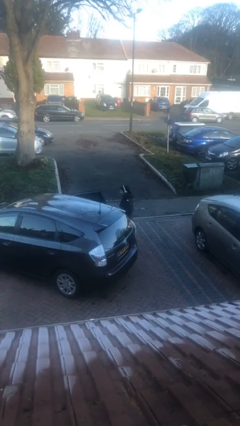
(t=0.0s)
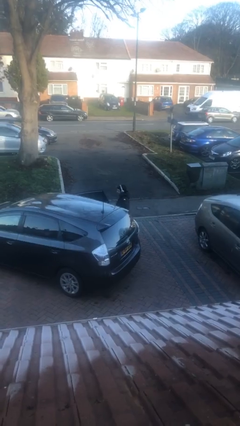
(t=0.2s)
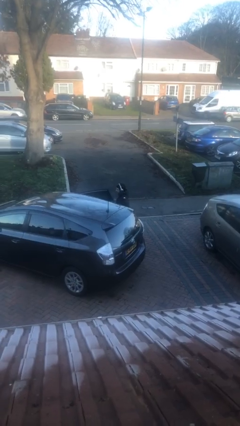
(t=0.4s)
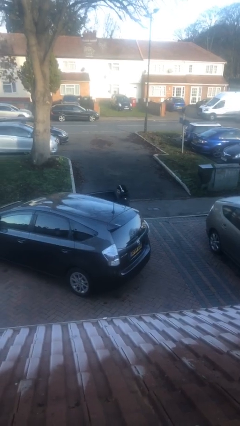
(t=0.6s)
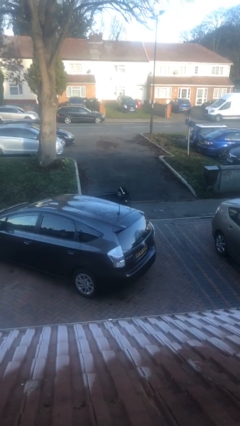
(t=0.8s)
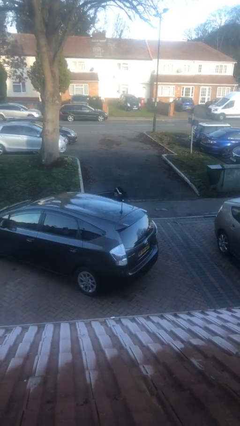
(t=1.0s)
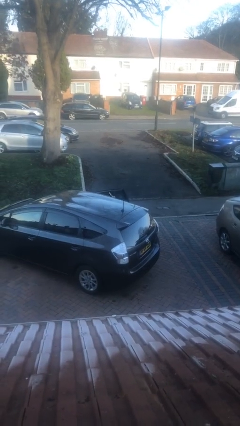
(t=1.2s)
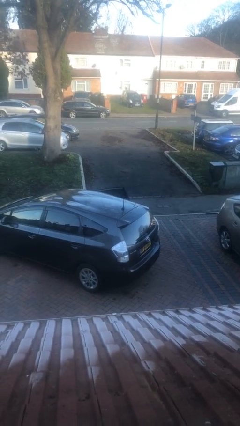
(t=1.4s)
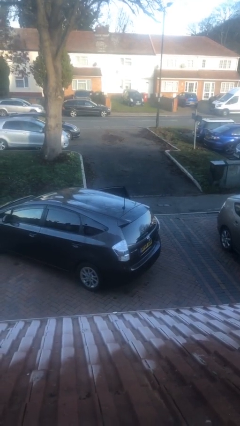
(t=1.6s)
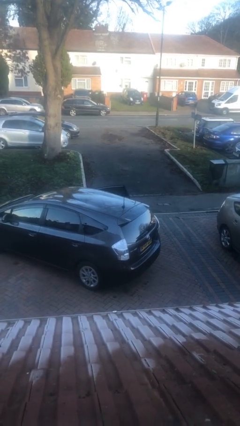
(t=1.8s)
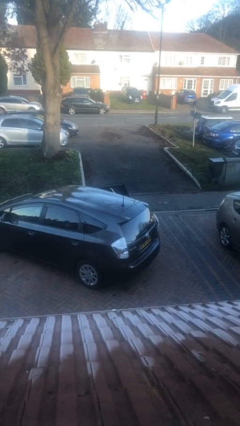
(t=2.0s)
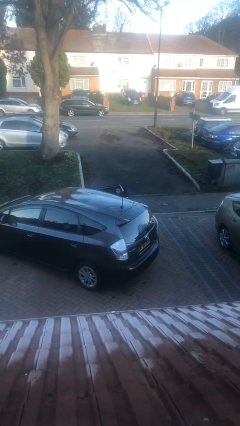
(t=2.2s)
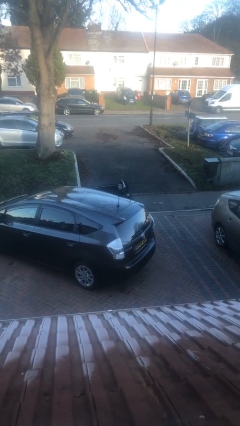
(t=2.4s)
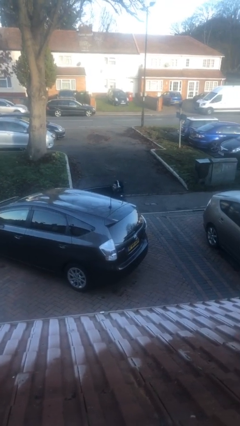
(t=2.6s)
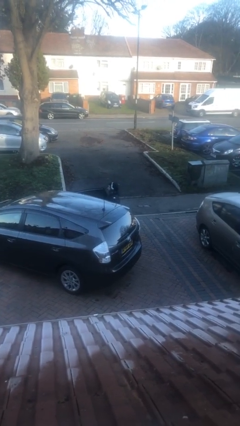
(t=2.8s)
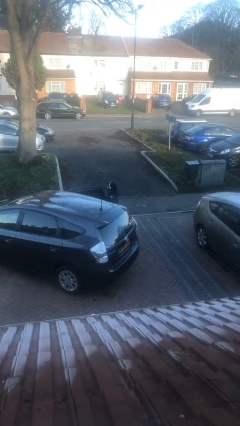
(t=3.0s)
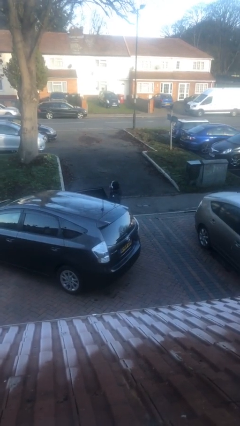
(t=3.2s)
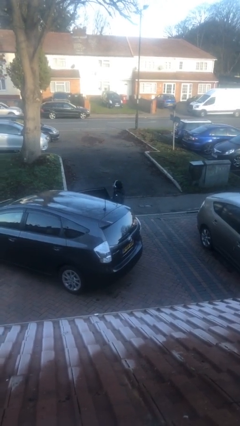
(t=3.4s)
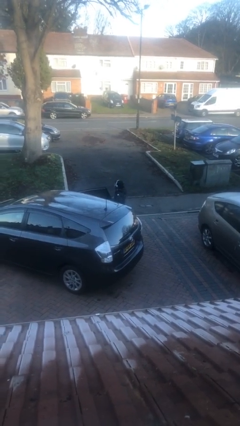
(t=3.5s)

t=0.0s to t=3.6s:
person loads car

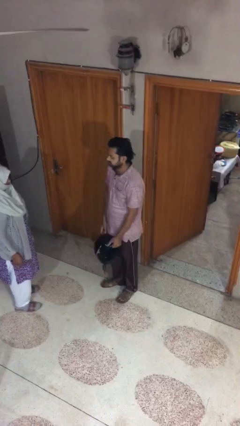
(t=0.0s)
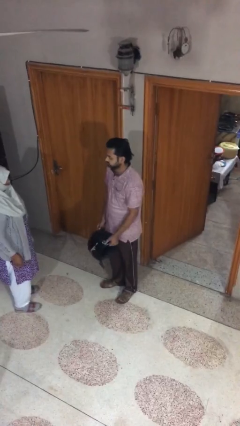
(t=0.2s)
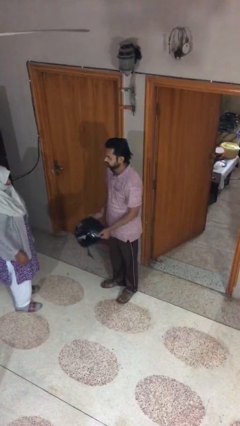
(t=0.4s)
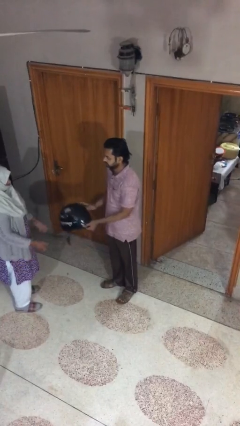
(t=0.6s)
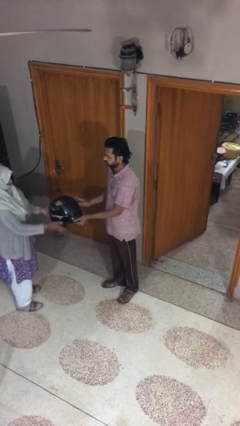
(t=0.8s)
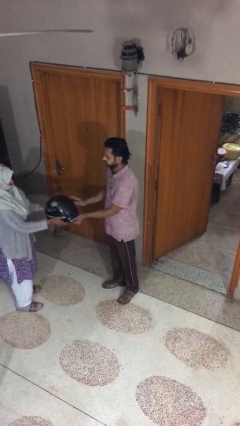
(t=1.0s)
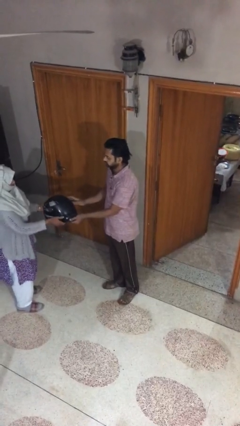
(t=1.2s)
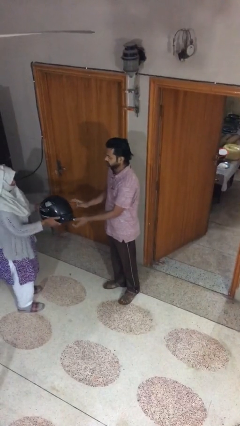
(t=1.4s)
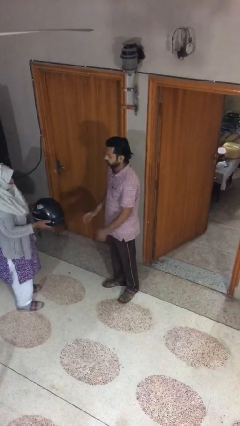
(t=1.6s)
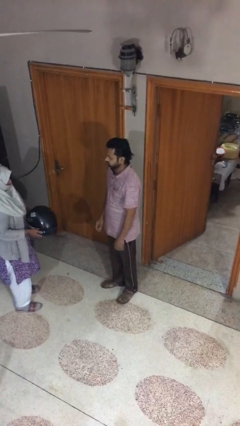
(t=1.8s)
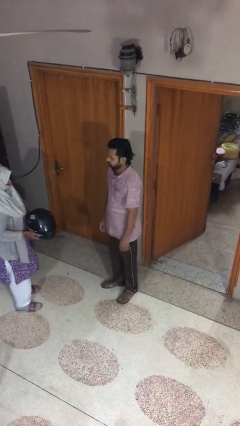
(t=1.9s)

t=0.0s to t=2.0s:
person transfers object to person

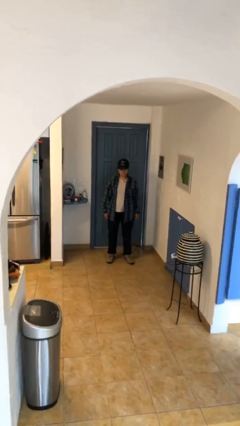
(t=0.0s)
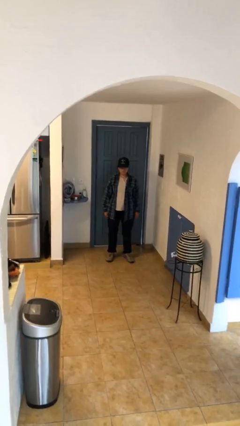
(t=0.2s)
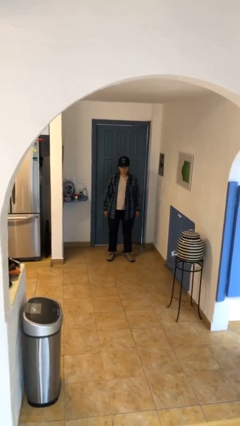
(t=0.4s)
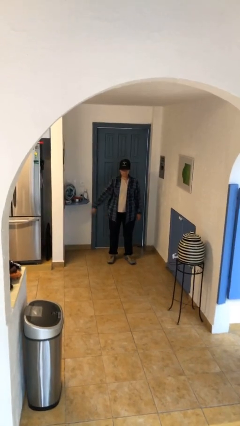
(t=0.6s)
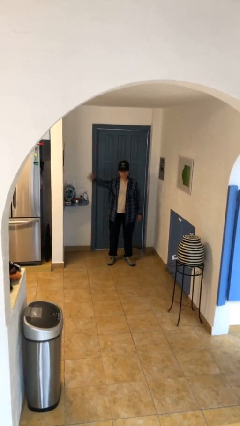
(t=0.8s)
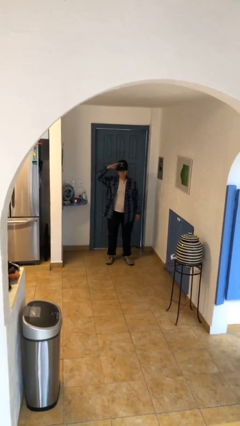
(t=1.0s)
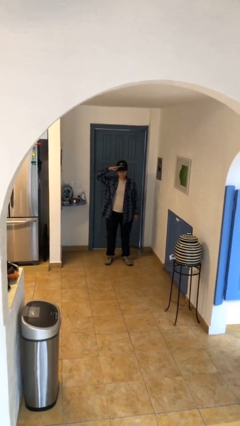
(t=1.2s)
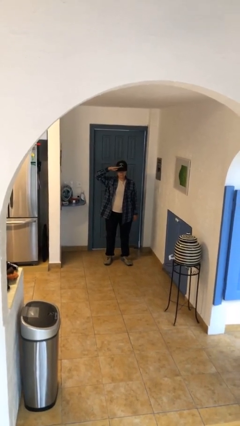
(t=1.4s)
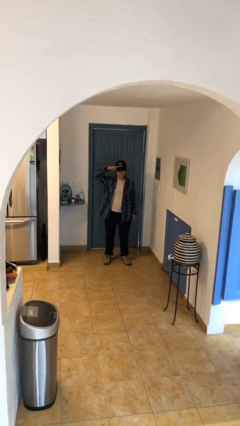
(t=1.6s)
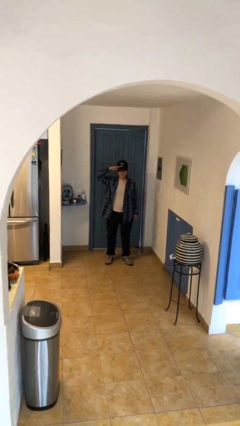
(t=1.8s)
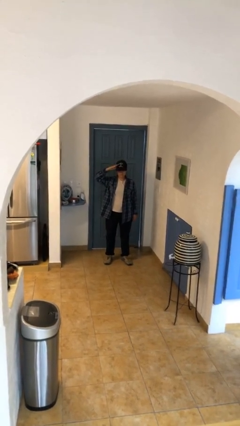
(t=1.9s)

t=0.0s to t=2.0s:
person salutes

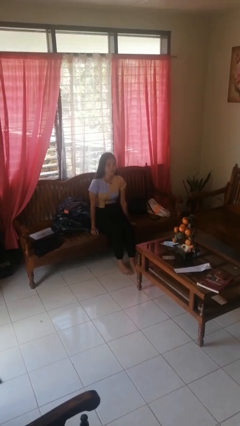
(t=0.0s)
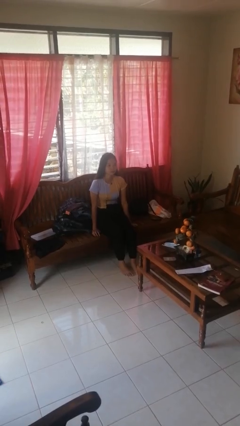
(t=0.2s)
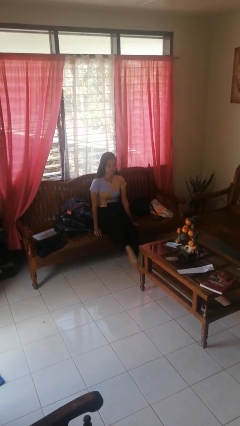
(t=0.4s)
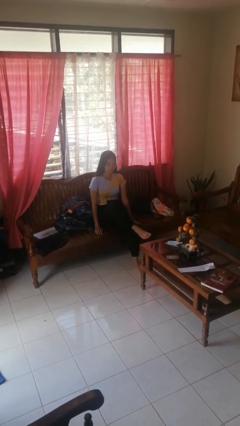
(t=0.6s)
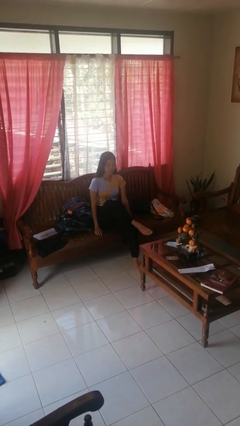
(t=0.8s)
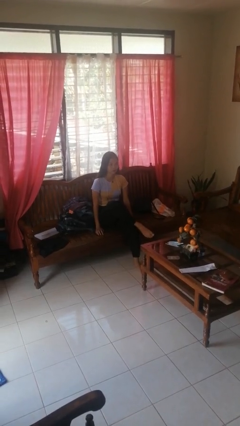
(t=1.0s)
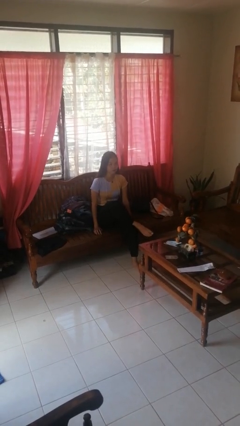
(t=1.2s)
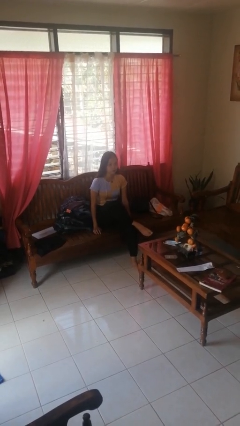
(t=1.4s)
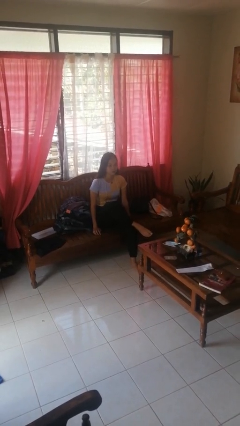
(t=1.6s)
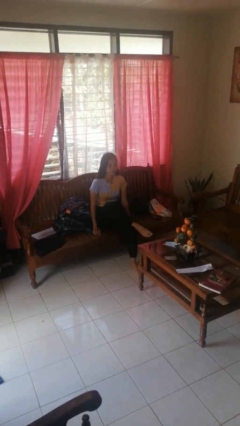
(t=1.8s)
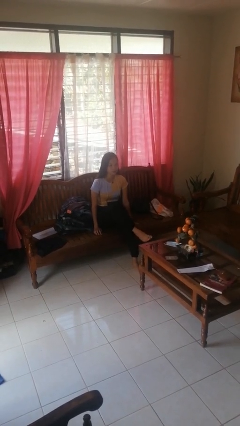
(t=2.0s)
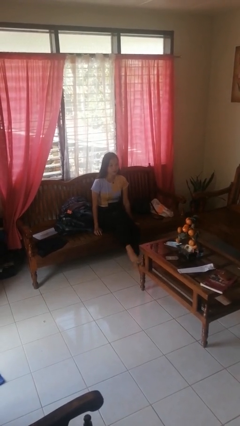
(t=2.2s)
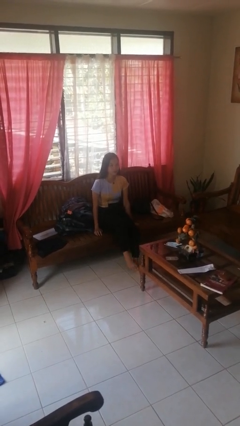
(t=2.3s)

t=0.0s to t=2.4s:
person crosses legs

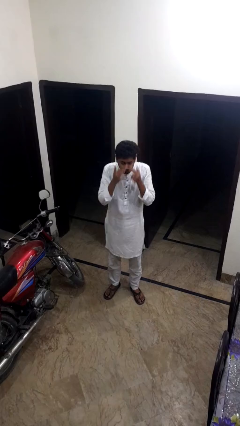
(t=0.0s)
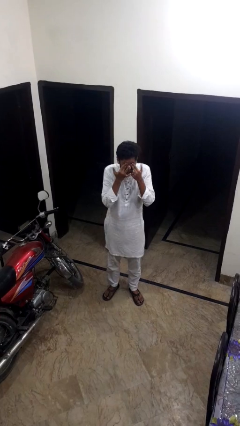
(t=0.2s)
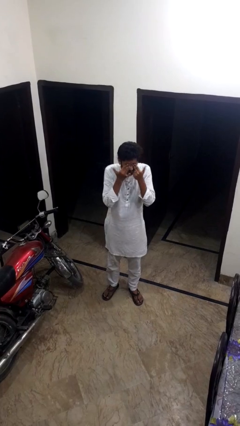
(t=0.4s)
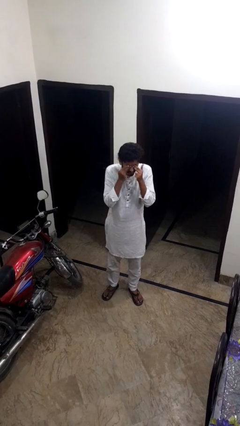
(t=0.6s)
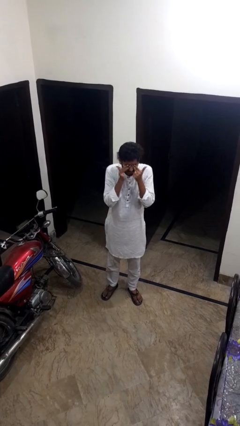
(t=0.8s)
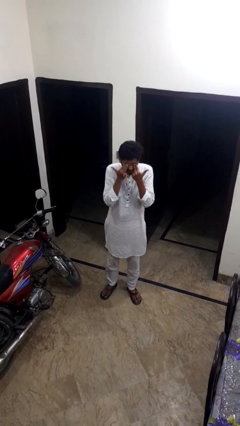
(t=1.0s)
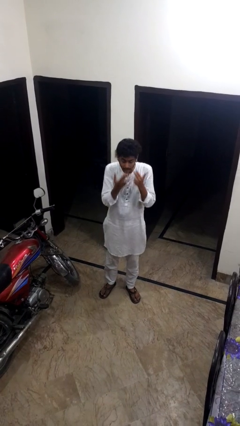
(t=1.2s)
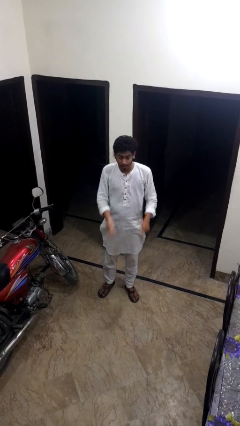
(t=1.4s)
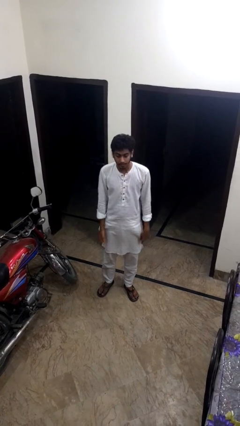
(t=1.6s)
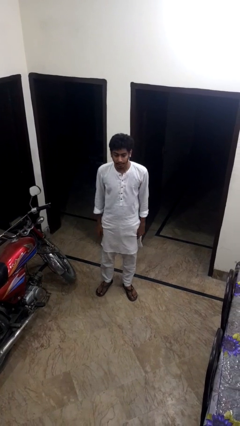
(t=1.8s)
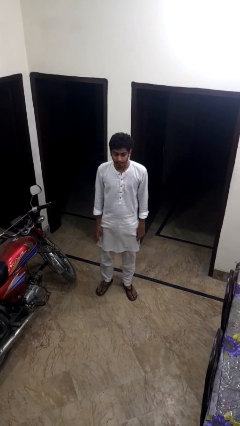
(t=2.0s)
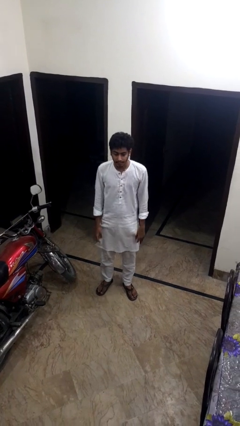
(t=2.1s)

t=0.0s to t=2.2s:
person rubs eyes

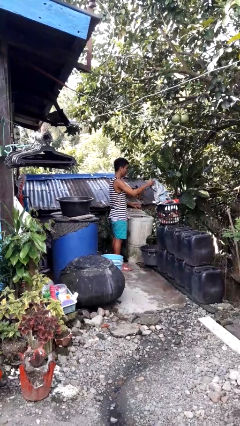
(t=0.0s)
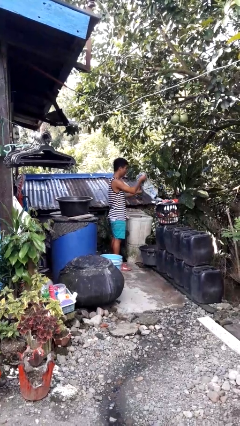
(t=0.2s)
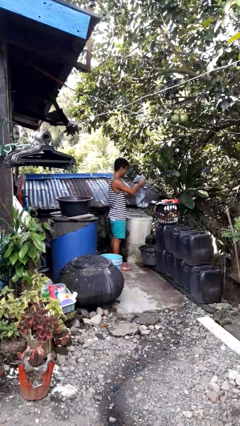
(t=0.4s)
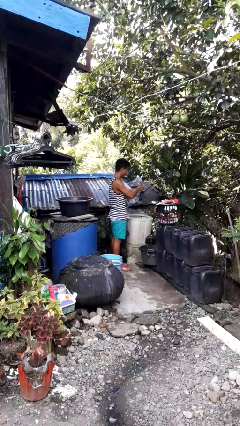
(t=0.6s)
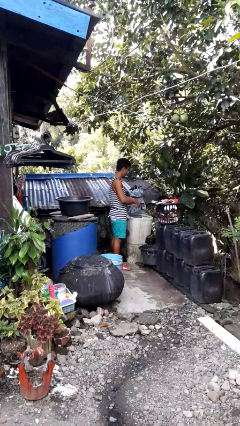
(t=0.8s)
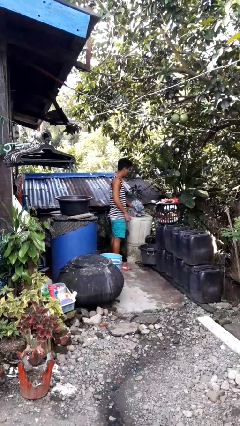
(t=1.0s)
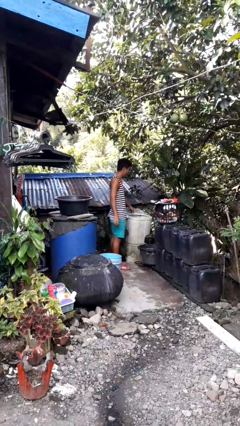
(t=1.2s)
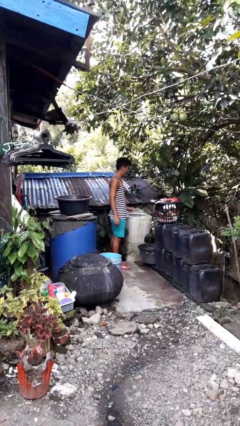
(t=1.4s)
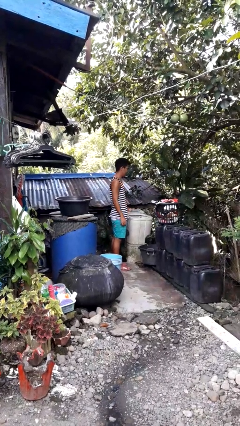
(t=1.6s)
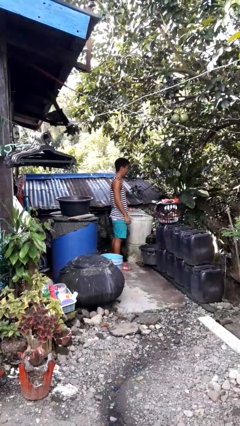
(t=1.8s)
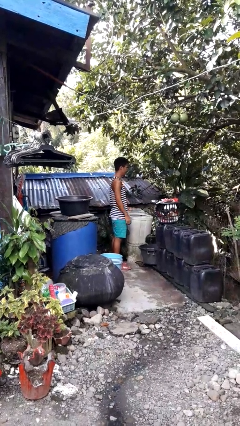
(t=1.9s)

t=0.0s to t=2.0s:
person loads clotheswasher

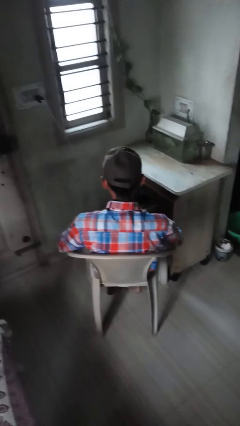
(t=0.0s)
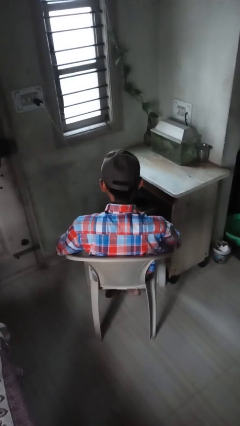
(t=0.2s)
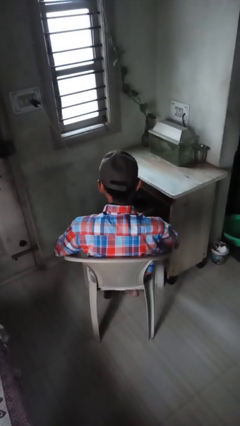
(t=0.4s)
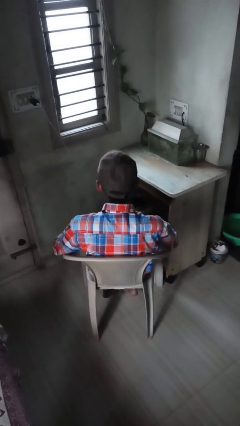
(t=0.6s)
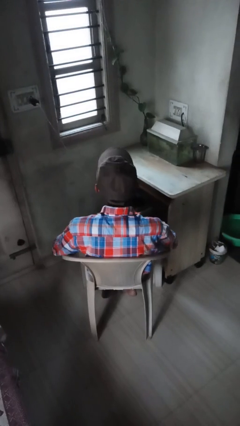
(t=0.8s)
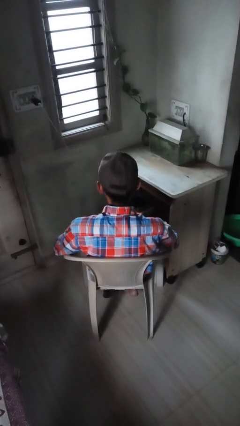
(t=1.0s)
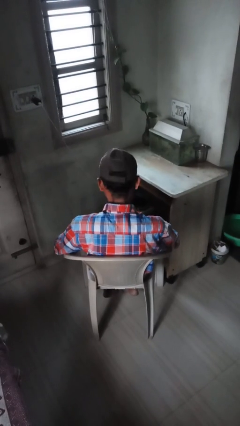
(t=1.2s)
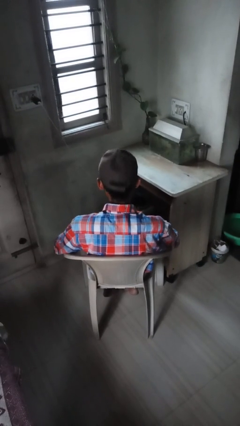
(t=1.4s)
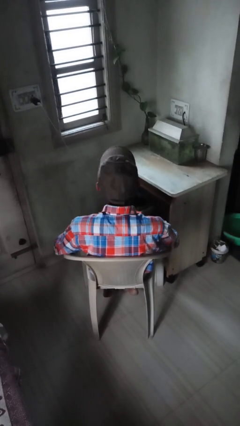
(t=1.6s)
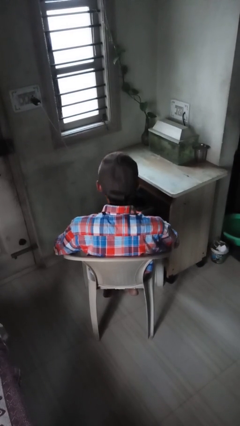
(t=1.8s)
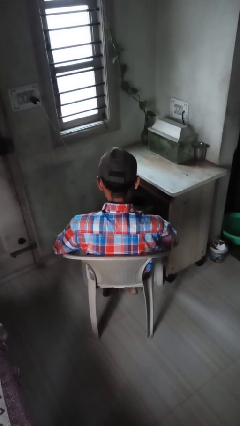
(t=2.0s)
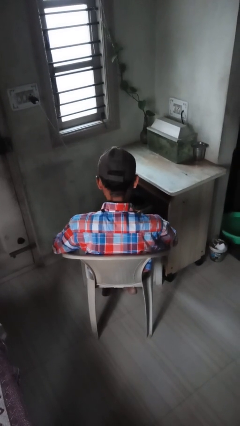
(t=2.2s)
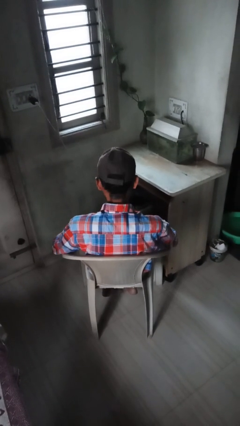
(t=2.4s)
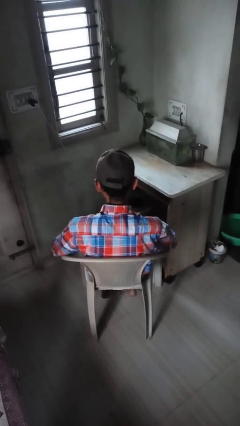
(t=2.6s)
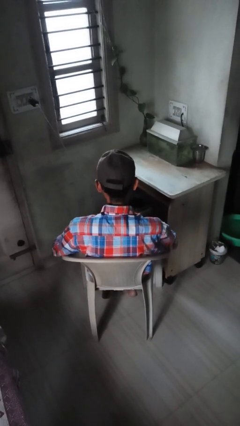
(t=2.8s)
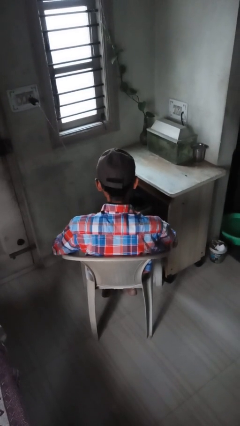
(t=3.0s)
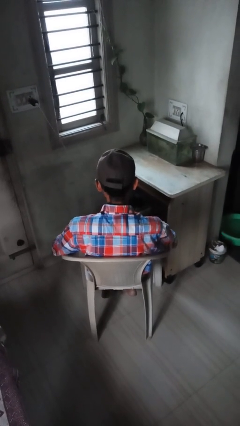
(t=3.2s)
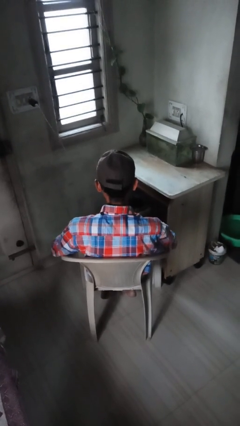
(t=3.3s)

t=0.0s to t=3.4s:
person nods head
